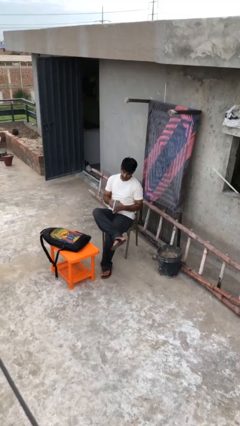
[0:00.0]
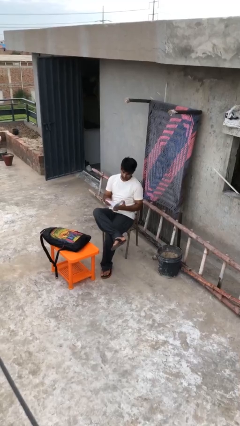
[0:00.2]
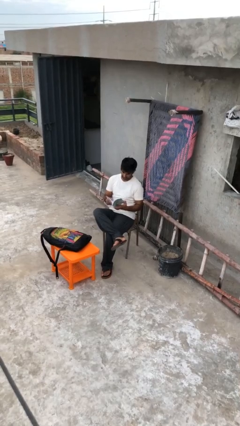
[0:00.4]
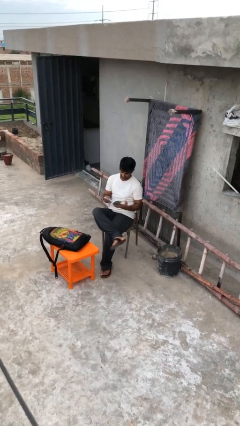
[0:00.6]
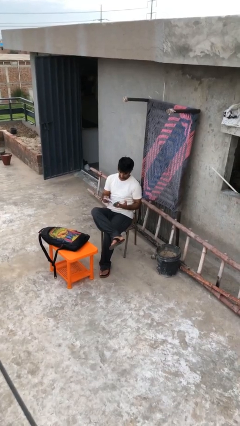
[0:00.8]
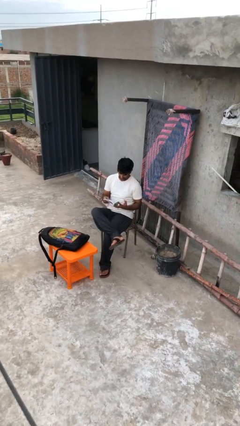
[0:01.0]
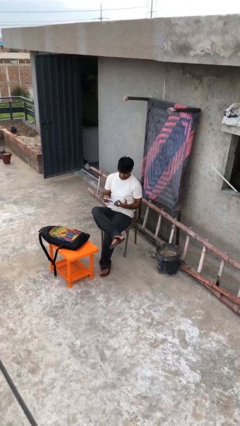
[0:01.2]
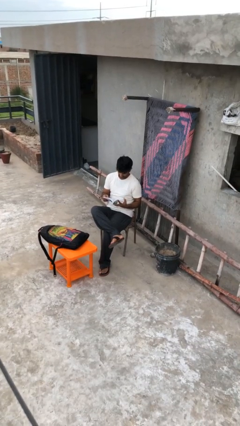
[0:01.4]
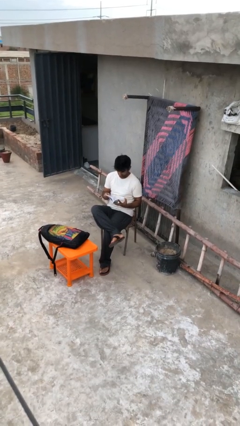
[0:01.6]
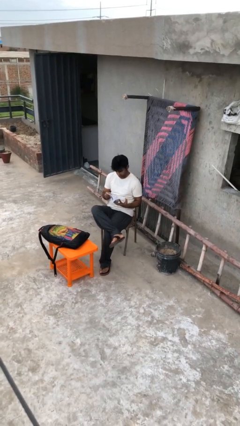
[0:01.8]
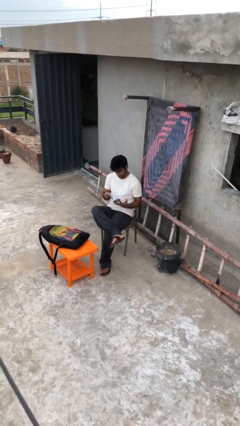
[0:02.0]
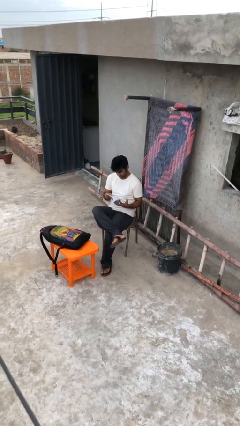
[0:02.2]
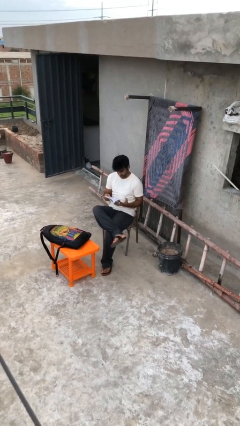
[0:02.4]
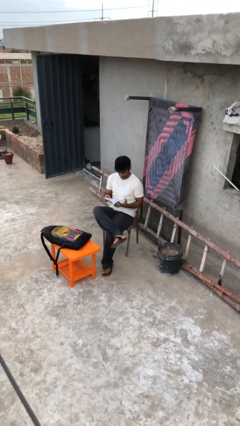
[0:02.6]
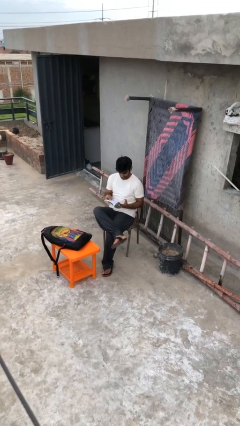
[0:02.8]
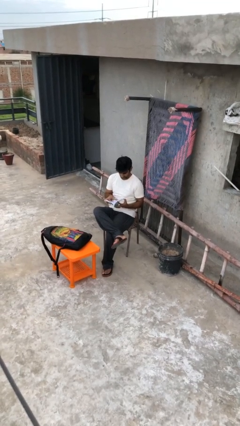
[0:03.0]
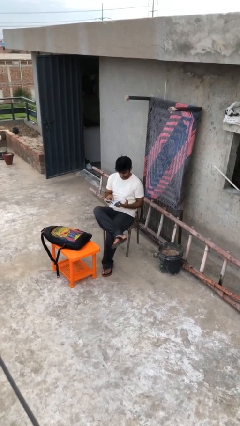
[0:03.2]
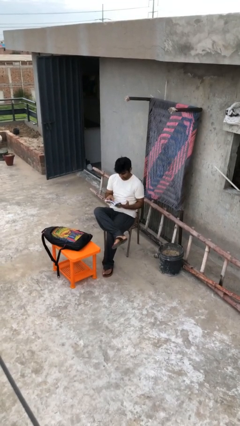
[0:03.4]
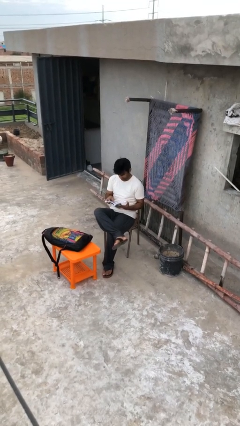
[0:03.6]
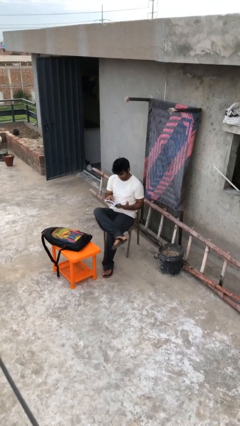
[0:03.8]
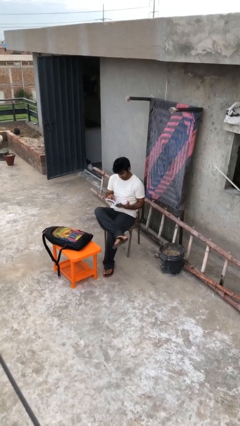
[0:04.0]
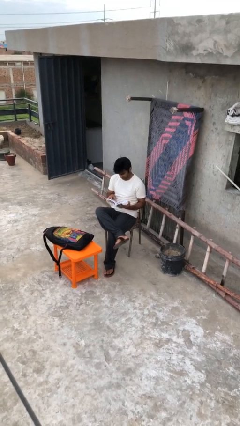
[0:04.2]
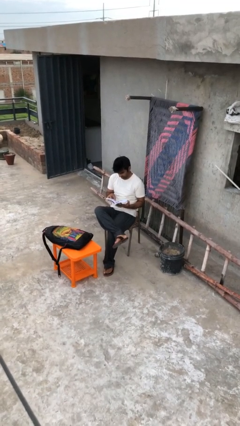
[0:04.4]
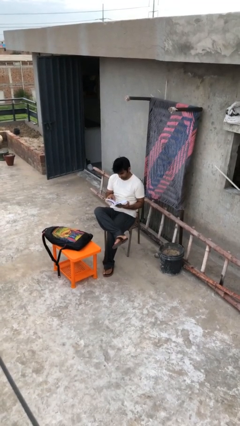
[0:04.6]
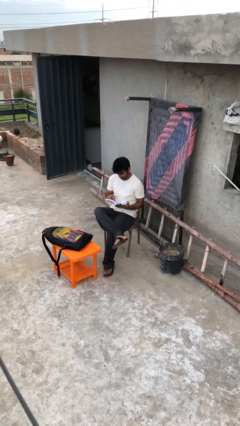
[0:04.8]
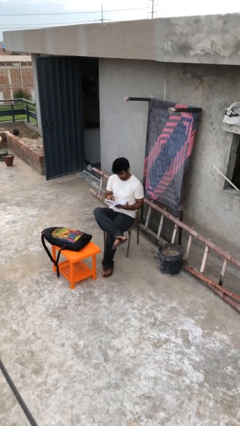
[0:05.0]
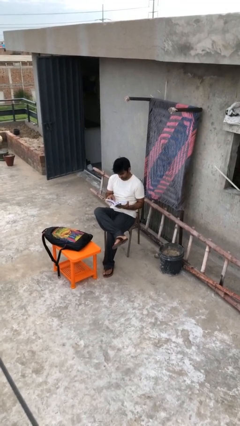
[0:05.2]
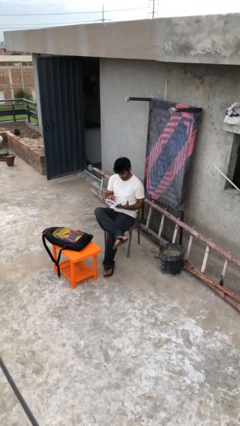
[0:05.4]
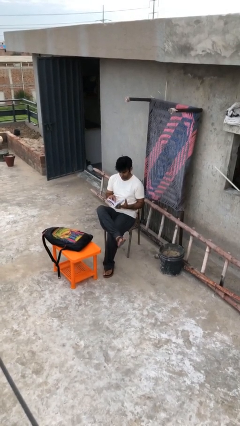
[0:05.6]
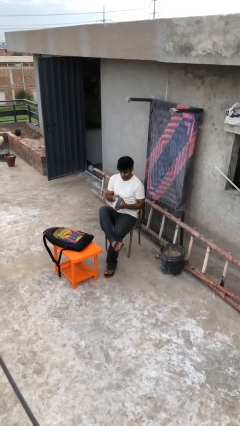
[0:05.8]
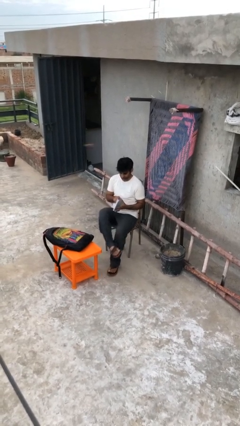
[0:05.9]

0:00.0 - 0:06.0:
person reads document

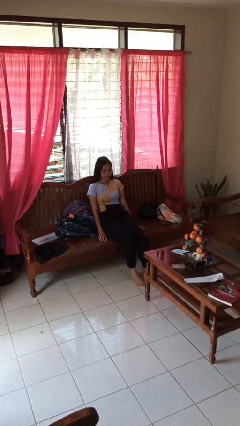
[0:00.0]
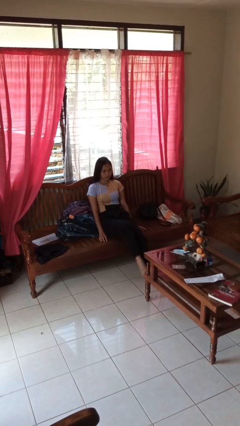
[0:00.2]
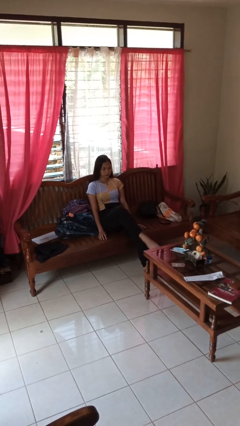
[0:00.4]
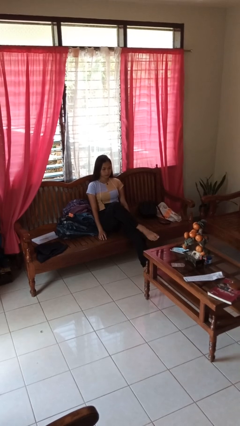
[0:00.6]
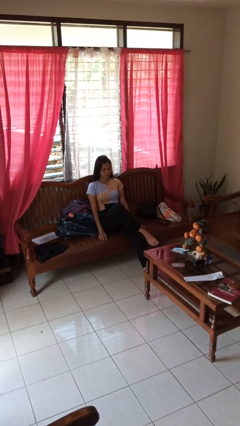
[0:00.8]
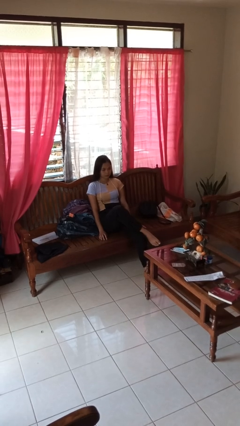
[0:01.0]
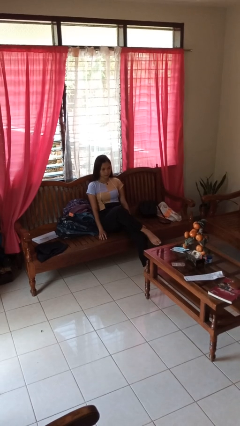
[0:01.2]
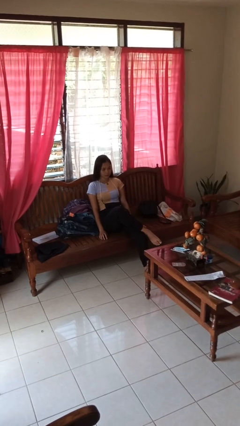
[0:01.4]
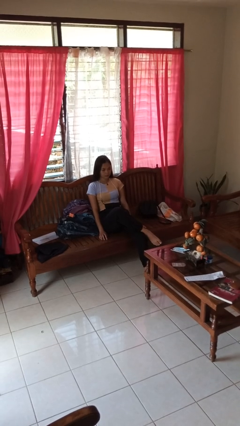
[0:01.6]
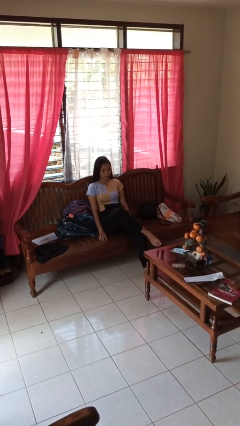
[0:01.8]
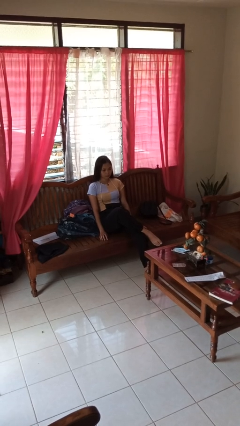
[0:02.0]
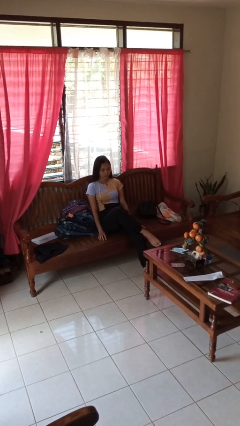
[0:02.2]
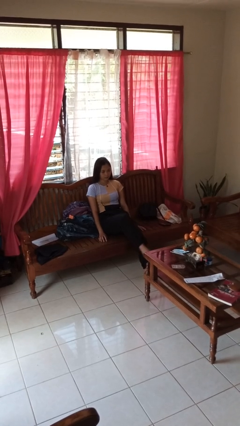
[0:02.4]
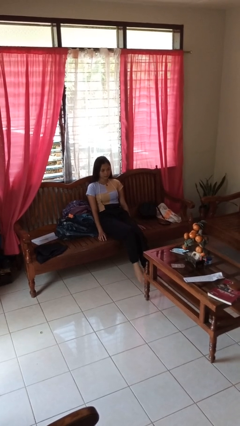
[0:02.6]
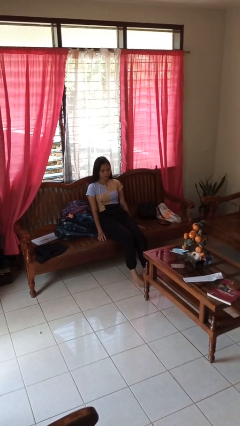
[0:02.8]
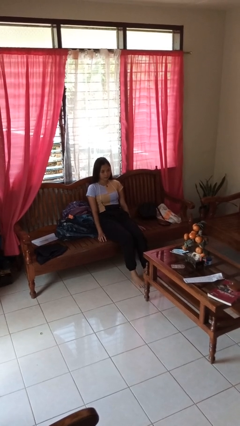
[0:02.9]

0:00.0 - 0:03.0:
person crosses legs

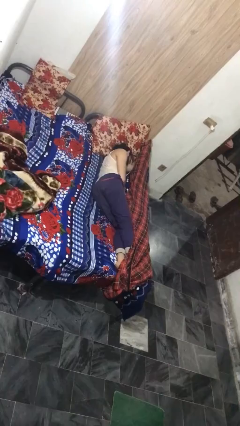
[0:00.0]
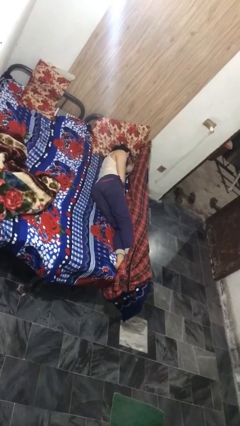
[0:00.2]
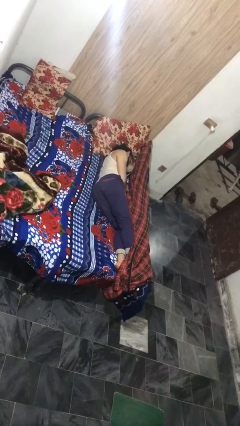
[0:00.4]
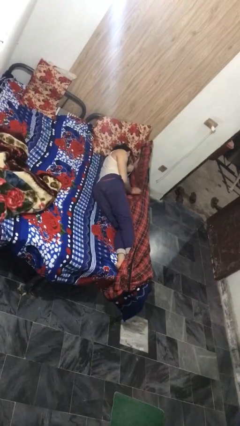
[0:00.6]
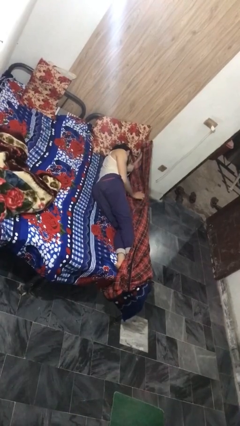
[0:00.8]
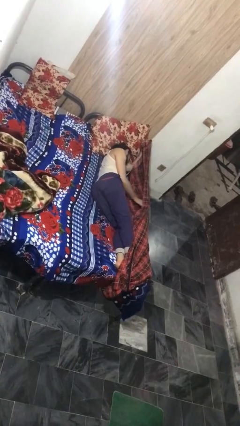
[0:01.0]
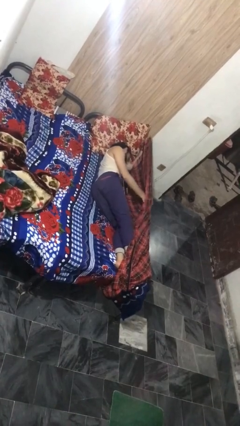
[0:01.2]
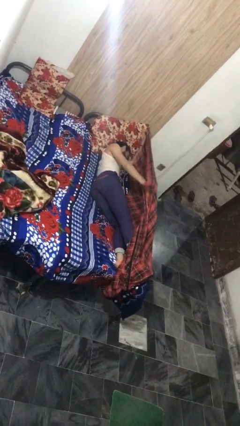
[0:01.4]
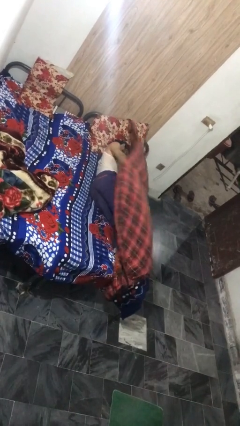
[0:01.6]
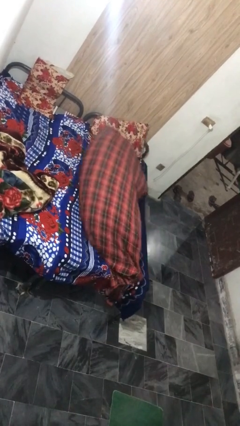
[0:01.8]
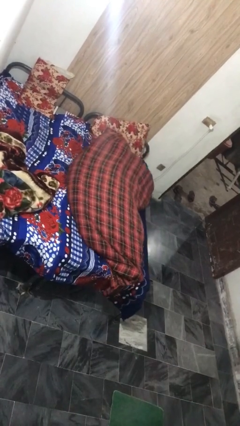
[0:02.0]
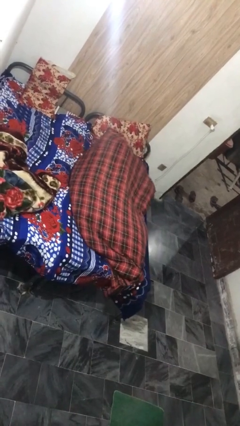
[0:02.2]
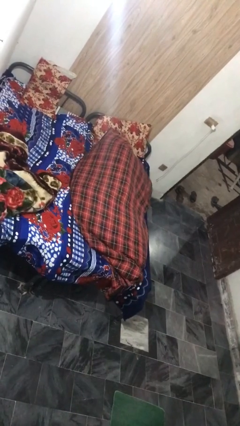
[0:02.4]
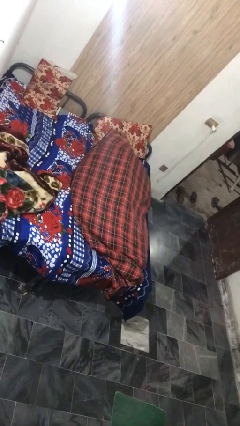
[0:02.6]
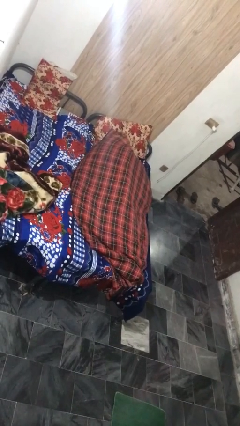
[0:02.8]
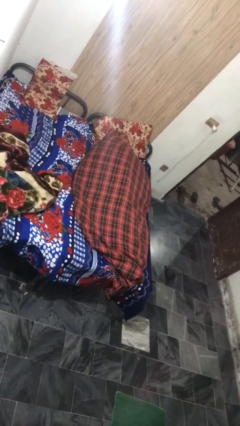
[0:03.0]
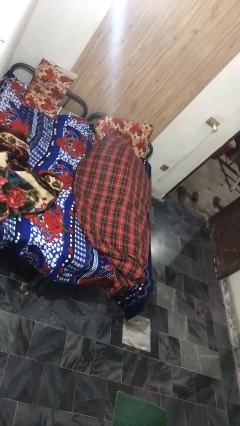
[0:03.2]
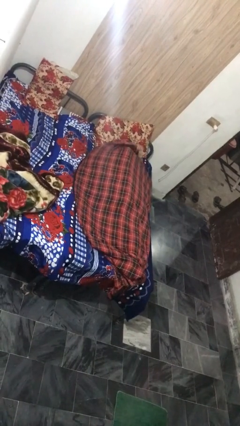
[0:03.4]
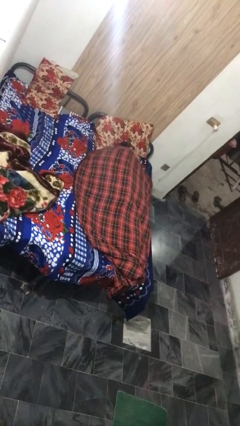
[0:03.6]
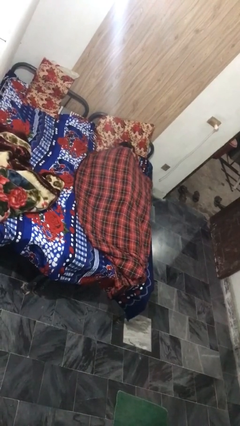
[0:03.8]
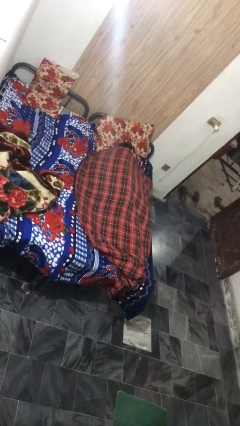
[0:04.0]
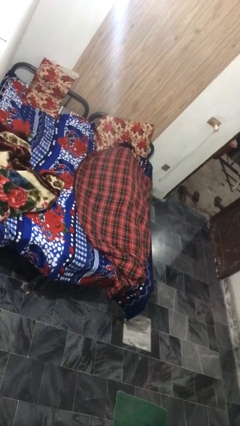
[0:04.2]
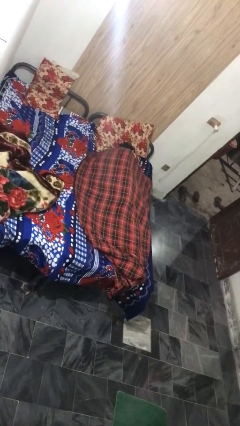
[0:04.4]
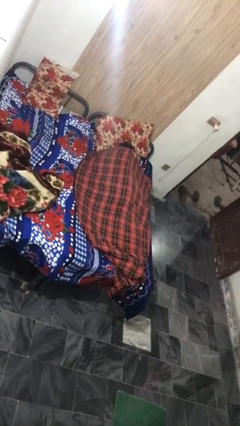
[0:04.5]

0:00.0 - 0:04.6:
person covers with bedsheets

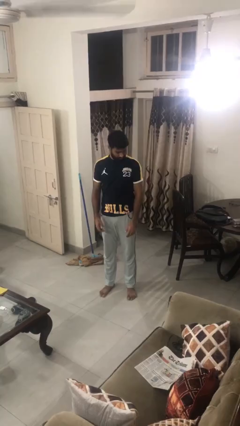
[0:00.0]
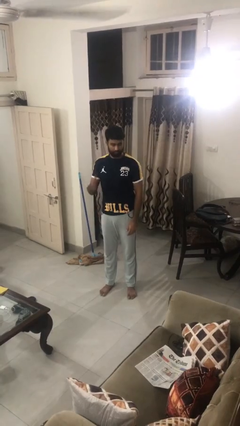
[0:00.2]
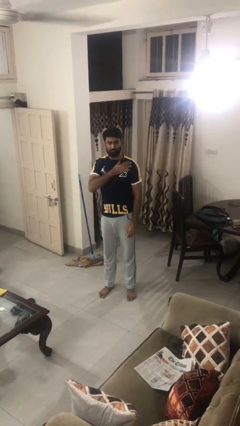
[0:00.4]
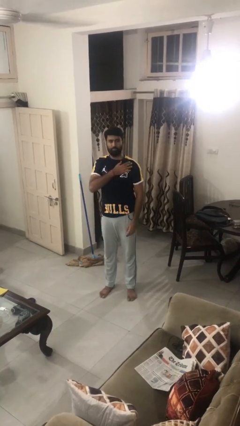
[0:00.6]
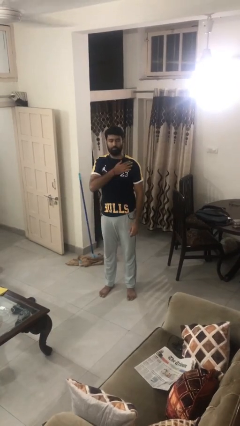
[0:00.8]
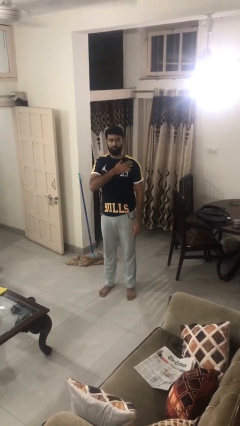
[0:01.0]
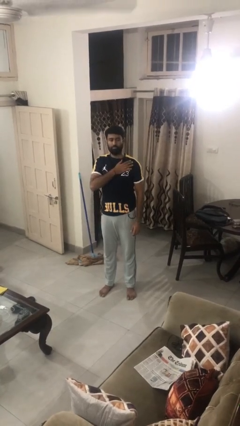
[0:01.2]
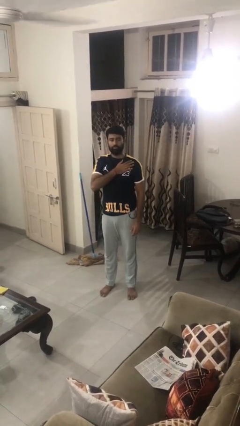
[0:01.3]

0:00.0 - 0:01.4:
person swats bug

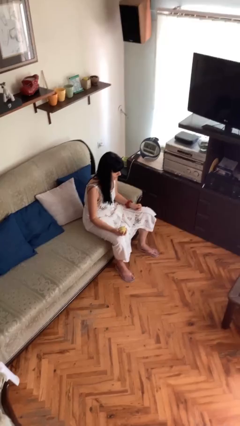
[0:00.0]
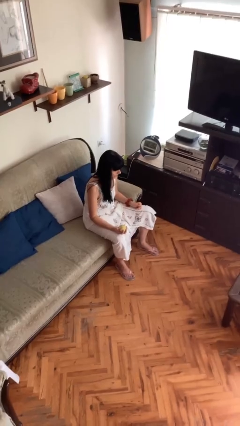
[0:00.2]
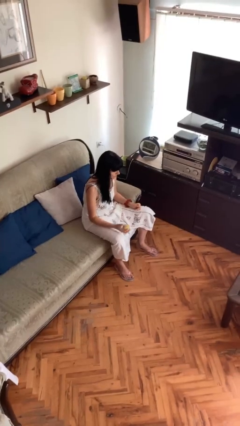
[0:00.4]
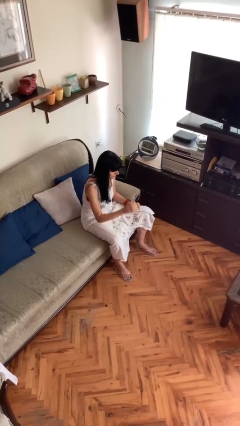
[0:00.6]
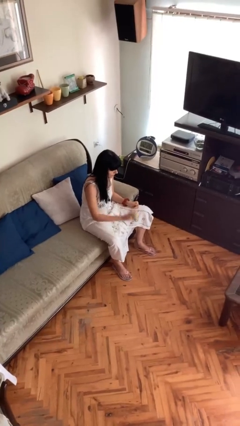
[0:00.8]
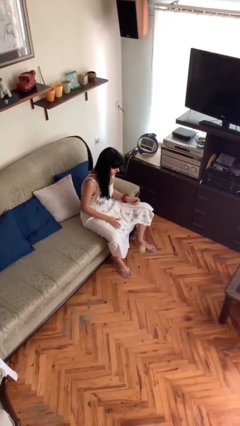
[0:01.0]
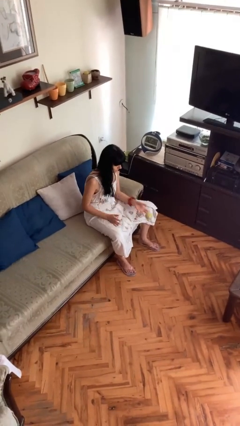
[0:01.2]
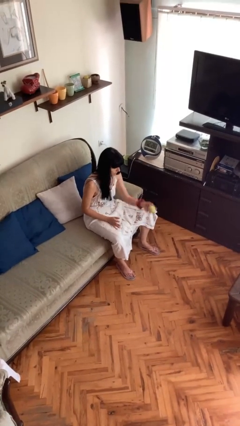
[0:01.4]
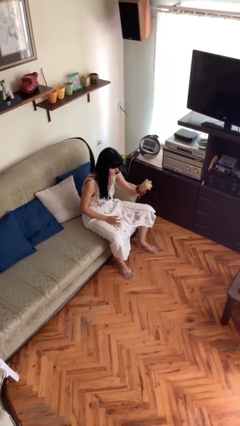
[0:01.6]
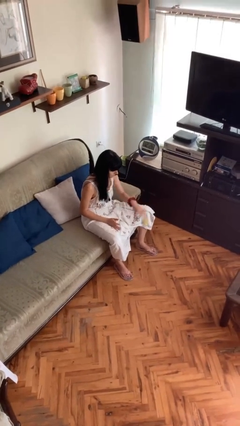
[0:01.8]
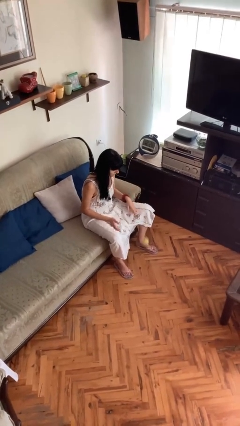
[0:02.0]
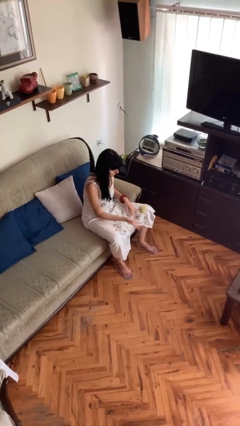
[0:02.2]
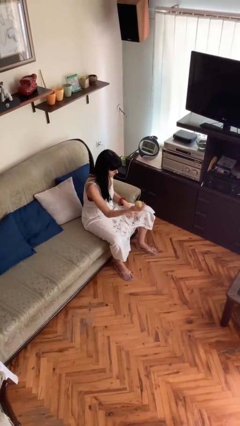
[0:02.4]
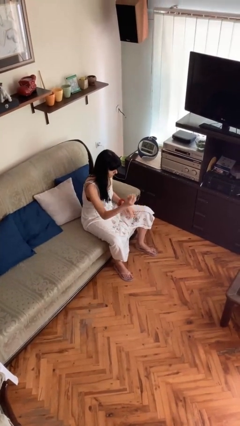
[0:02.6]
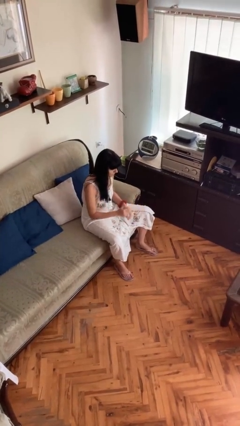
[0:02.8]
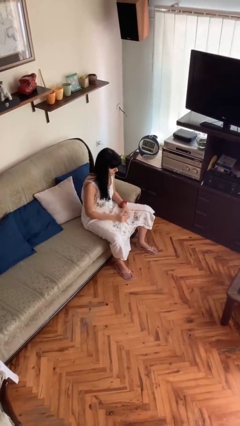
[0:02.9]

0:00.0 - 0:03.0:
person bounces ball on floor
